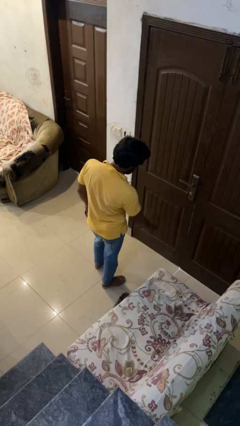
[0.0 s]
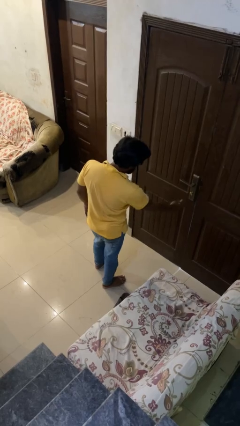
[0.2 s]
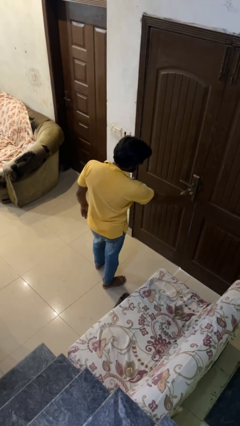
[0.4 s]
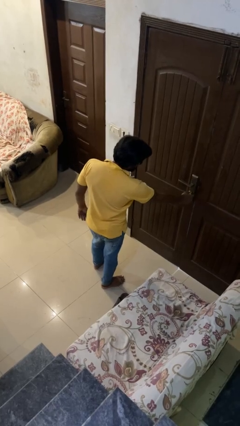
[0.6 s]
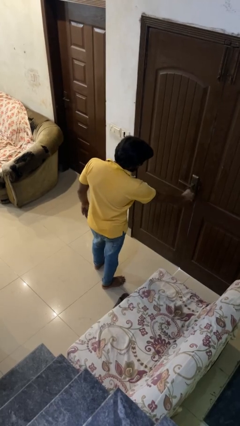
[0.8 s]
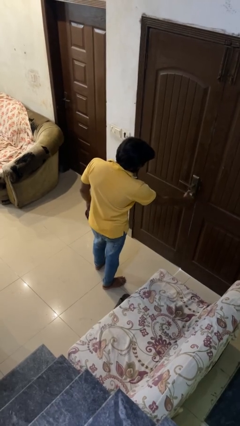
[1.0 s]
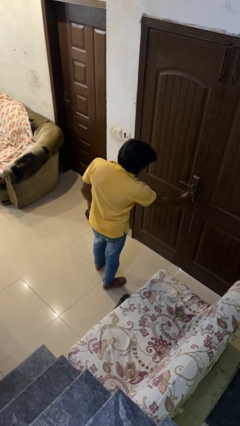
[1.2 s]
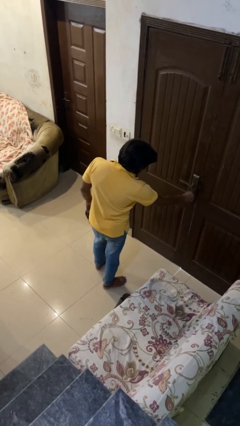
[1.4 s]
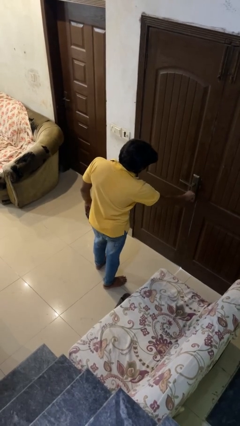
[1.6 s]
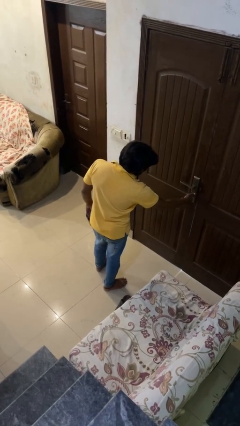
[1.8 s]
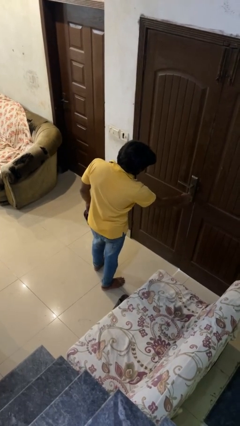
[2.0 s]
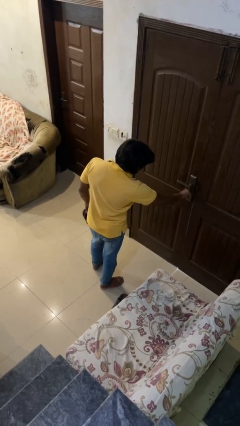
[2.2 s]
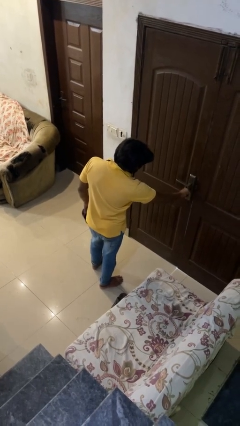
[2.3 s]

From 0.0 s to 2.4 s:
person unlocks door with keys

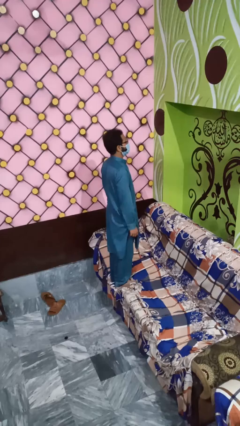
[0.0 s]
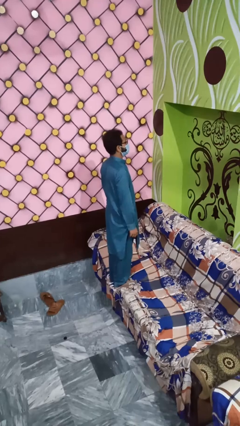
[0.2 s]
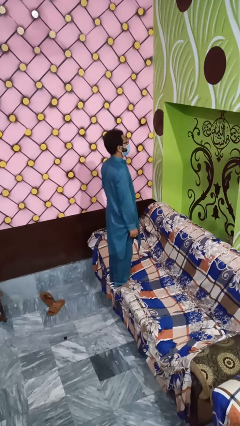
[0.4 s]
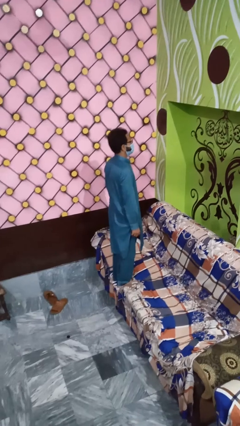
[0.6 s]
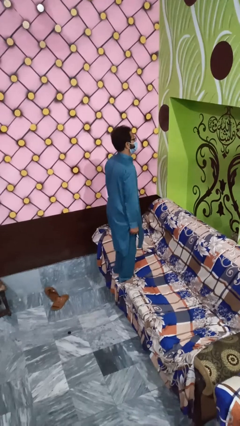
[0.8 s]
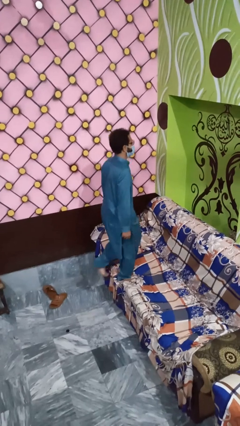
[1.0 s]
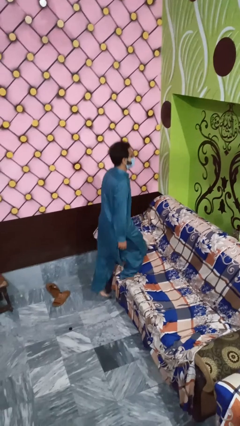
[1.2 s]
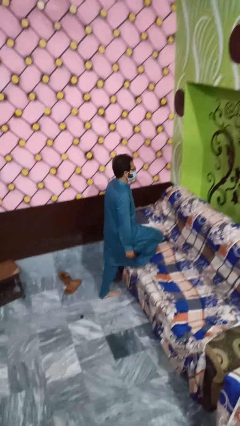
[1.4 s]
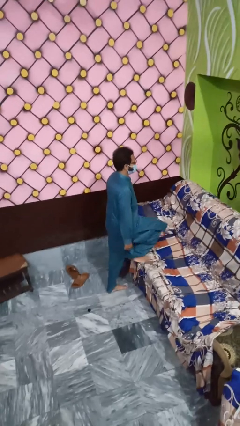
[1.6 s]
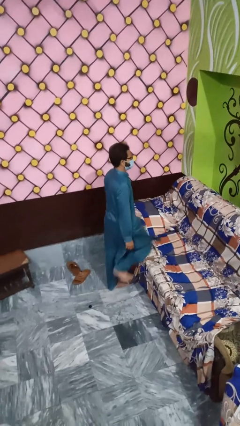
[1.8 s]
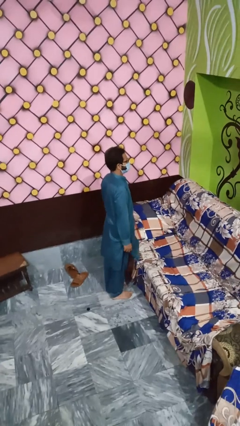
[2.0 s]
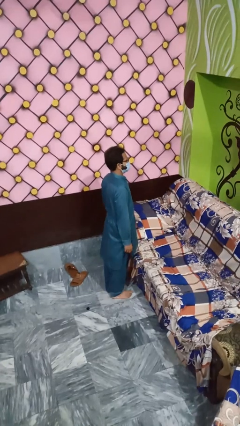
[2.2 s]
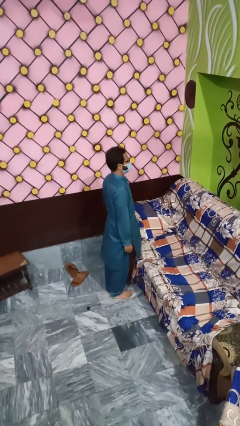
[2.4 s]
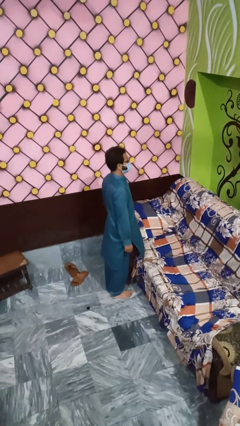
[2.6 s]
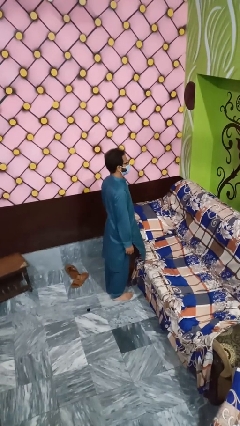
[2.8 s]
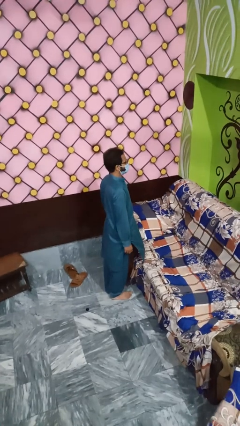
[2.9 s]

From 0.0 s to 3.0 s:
person climbs off couch

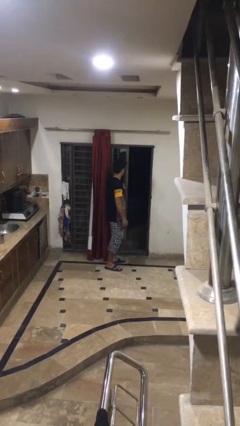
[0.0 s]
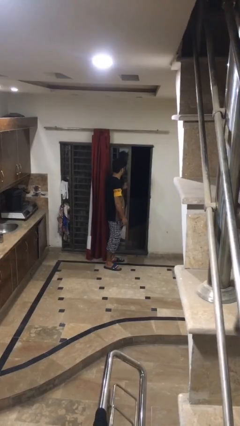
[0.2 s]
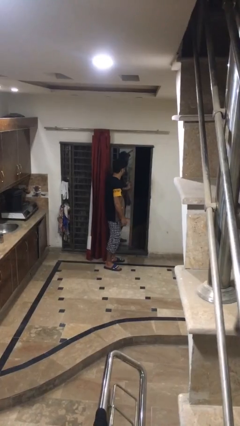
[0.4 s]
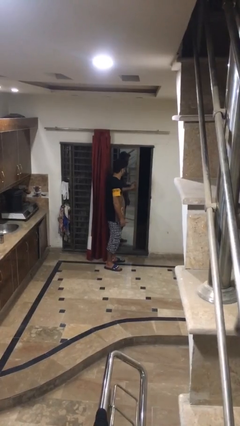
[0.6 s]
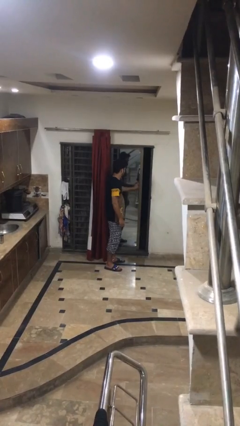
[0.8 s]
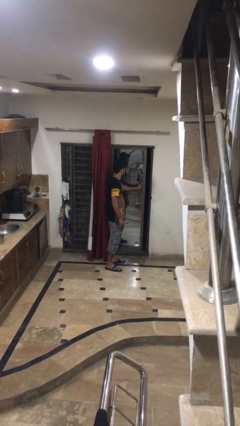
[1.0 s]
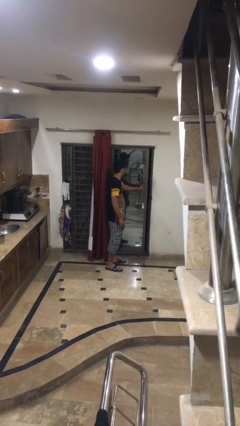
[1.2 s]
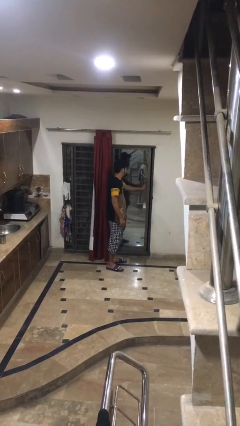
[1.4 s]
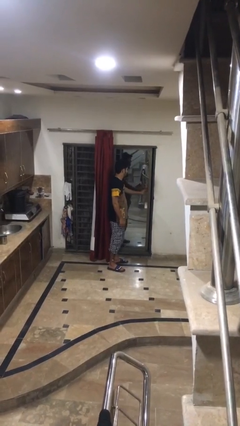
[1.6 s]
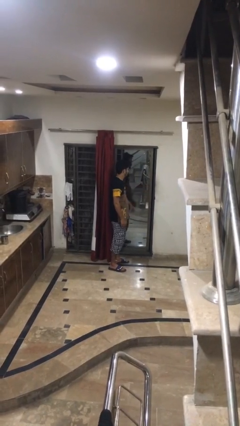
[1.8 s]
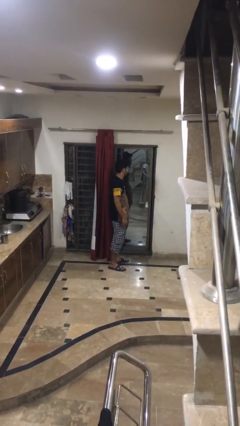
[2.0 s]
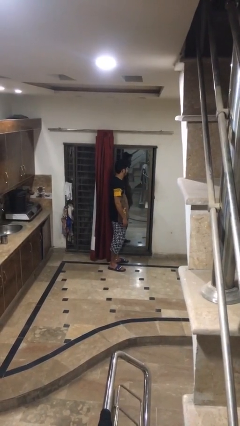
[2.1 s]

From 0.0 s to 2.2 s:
person closes home window

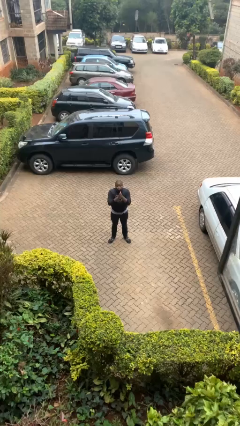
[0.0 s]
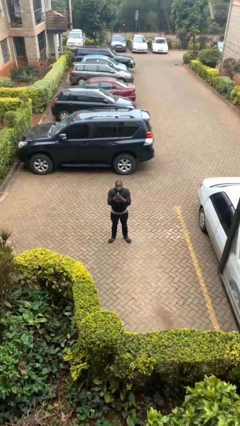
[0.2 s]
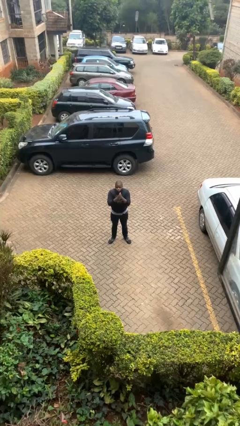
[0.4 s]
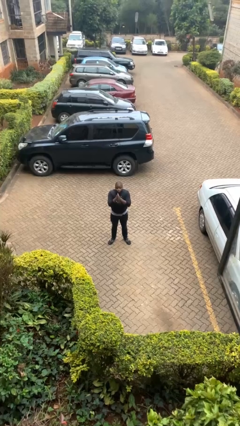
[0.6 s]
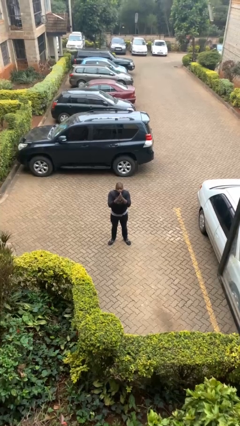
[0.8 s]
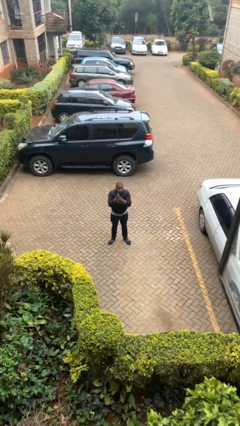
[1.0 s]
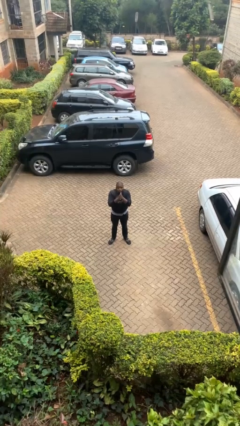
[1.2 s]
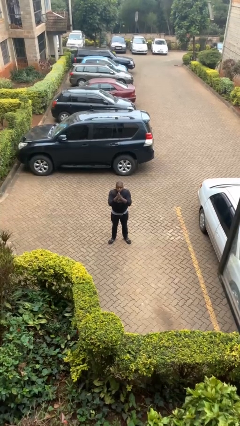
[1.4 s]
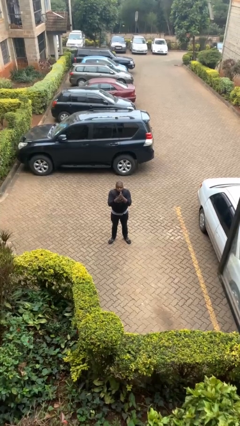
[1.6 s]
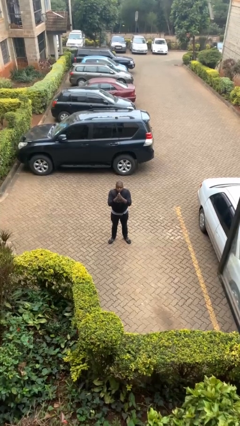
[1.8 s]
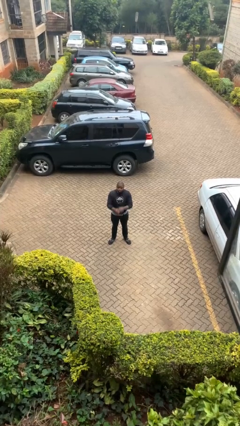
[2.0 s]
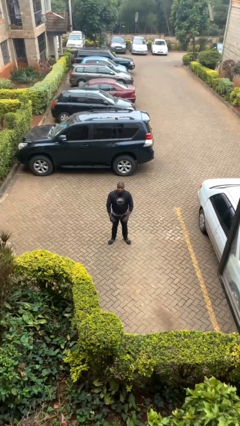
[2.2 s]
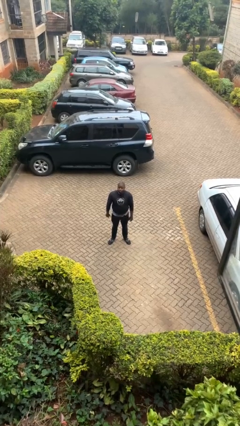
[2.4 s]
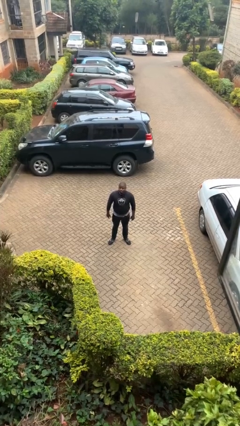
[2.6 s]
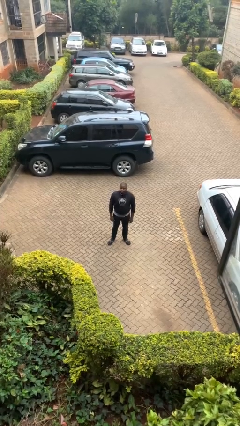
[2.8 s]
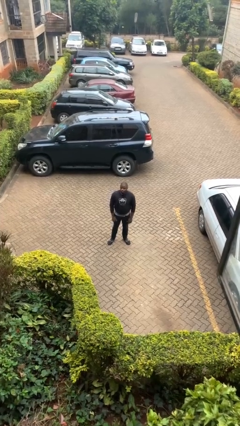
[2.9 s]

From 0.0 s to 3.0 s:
person blows into hands

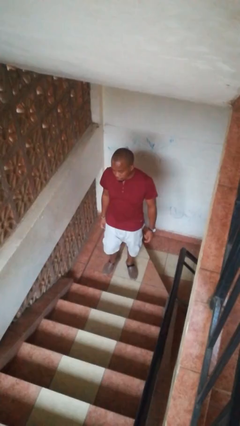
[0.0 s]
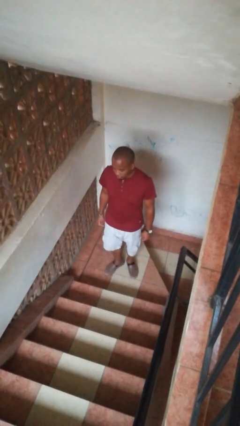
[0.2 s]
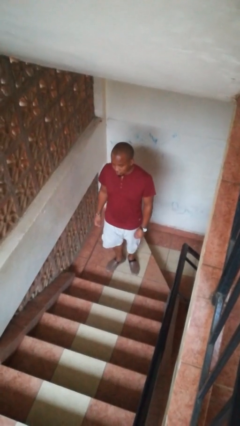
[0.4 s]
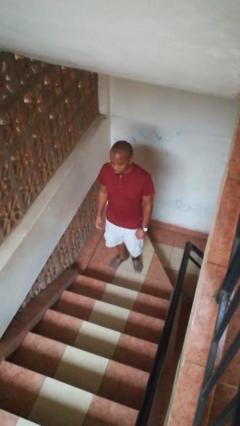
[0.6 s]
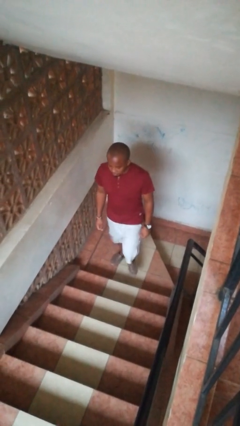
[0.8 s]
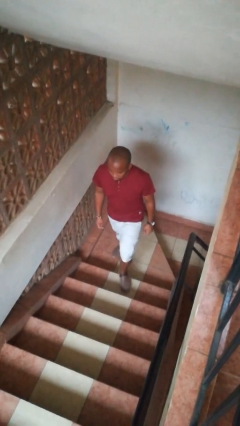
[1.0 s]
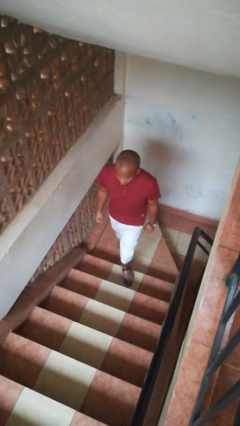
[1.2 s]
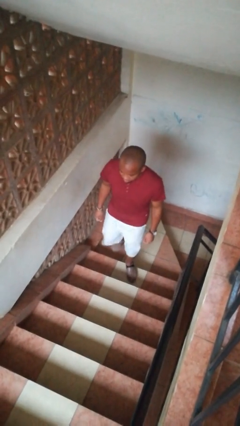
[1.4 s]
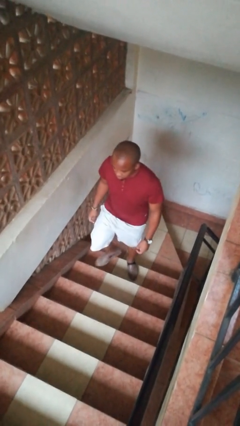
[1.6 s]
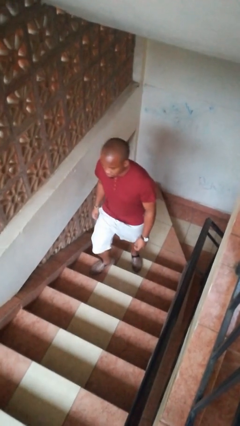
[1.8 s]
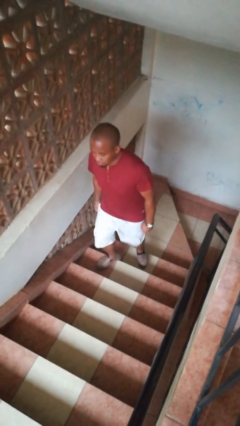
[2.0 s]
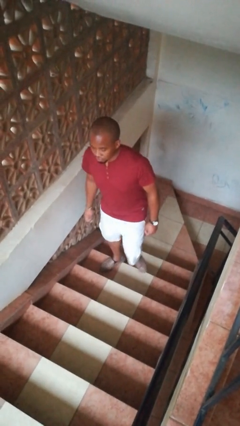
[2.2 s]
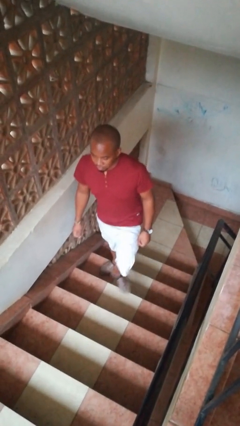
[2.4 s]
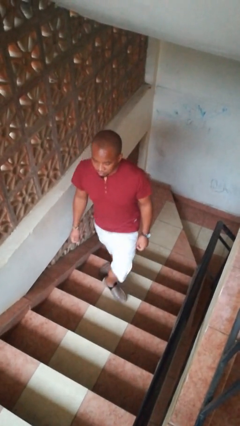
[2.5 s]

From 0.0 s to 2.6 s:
person climbs up stairs

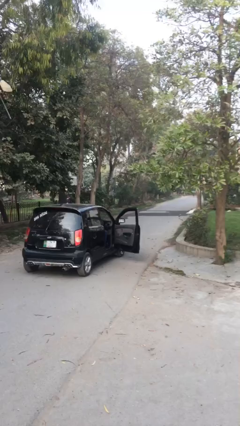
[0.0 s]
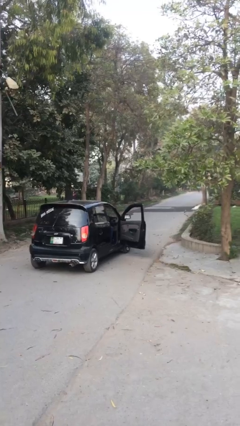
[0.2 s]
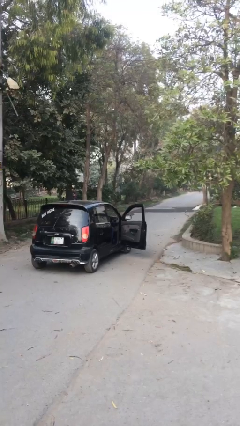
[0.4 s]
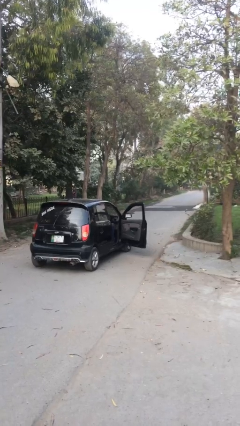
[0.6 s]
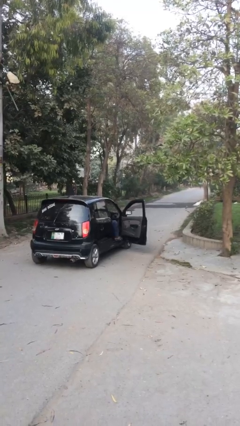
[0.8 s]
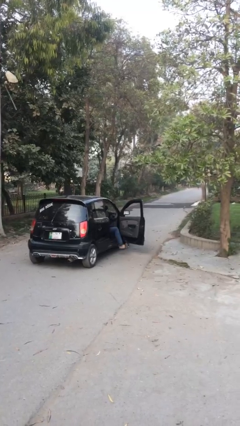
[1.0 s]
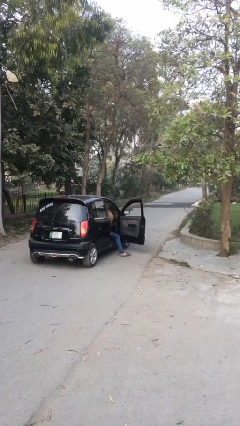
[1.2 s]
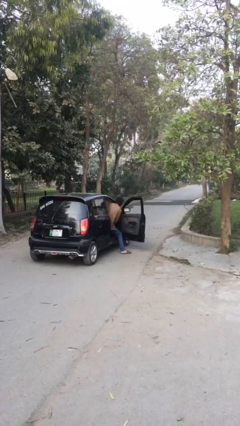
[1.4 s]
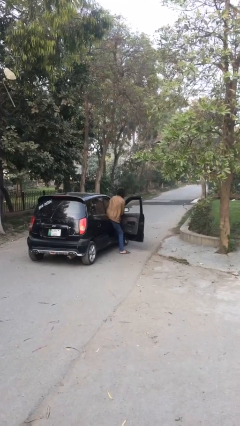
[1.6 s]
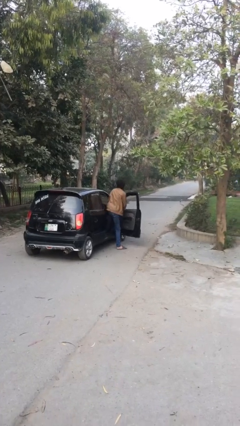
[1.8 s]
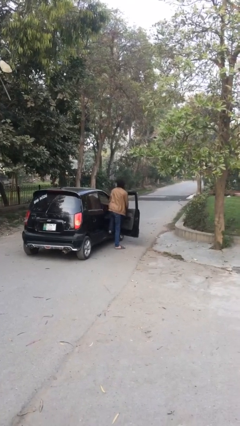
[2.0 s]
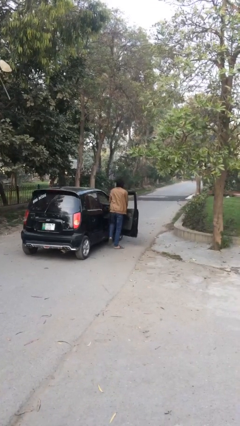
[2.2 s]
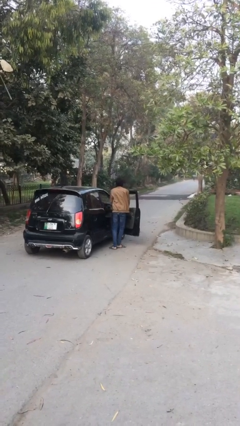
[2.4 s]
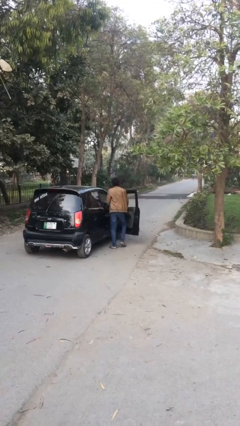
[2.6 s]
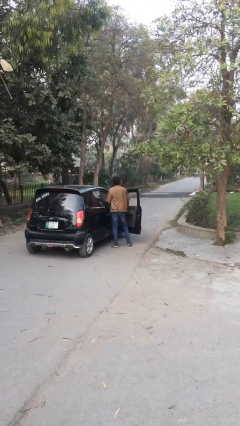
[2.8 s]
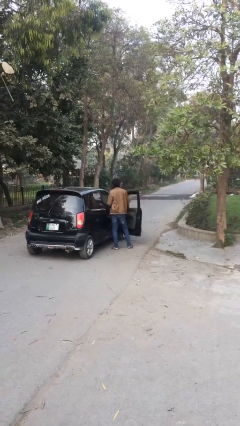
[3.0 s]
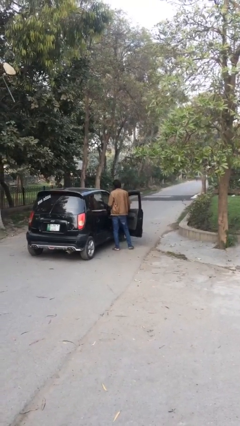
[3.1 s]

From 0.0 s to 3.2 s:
person exits car

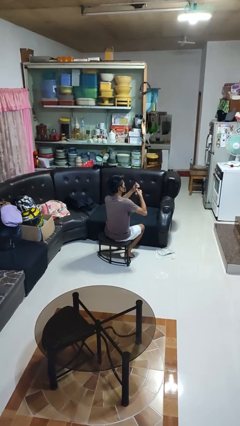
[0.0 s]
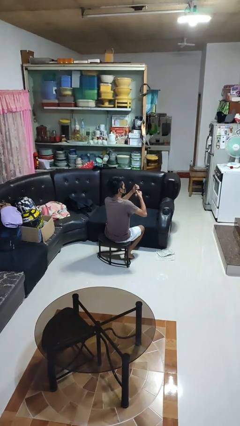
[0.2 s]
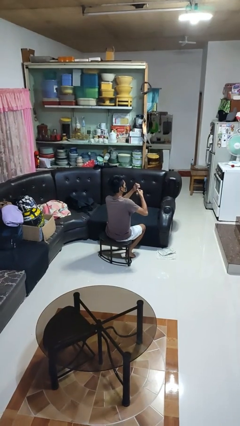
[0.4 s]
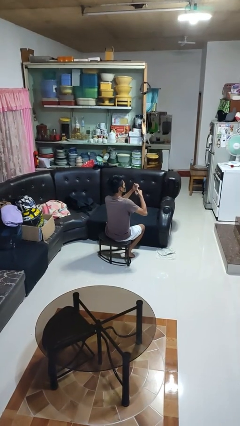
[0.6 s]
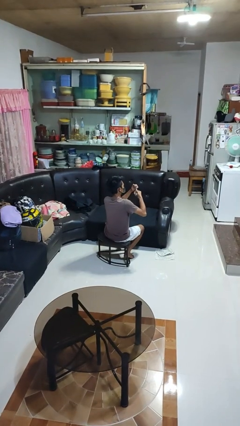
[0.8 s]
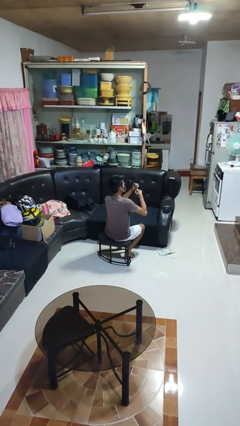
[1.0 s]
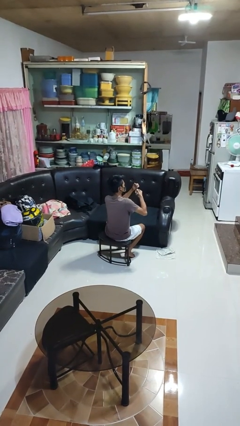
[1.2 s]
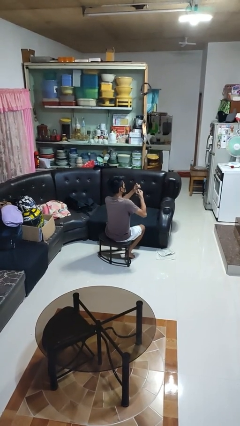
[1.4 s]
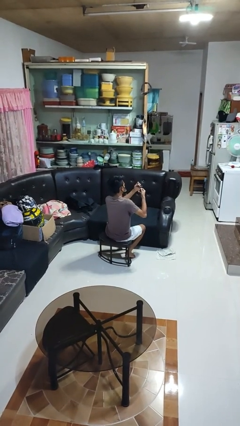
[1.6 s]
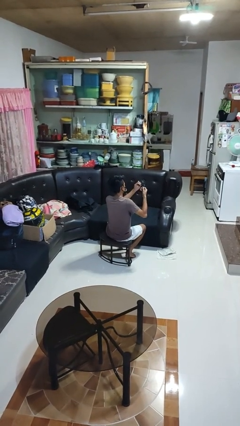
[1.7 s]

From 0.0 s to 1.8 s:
person clips fingernails
